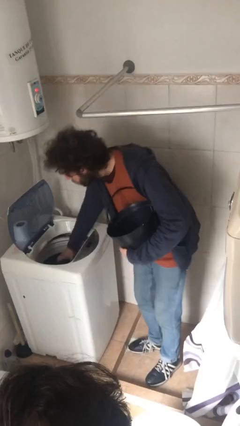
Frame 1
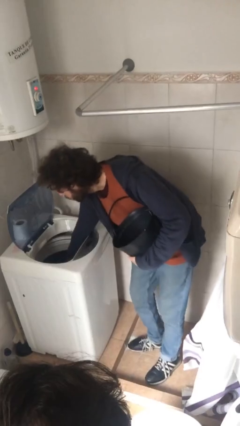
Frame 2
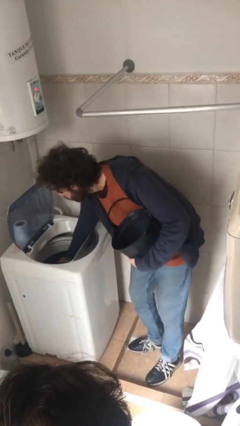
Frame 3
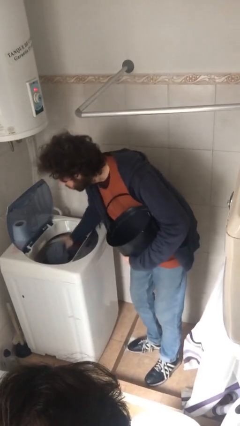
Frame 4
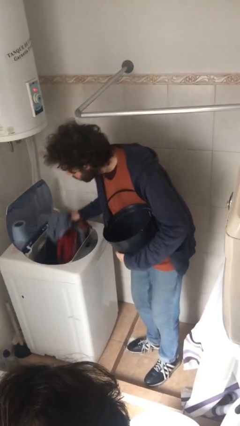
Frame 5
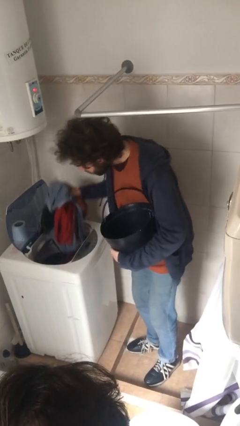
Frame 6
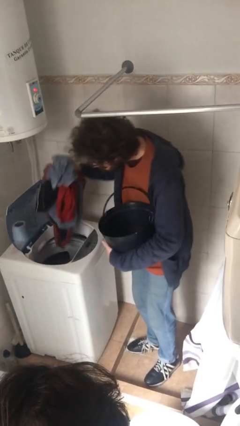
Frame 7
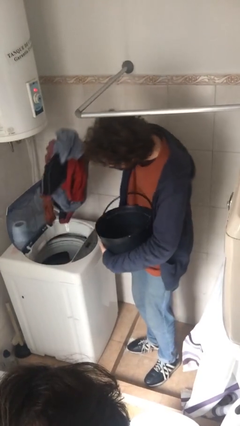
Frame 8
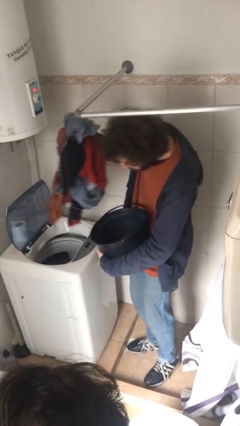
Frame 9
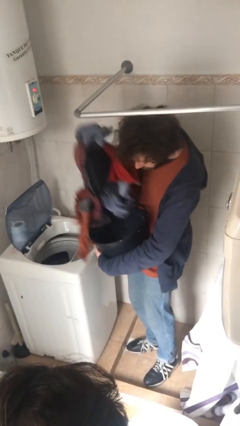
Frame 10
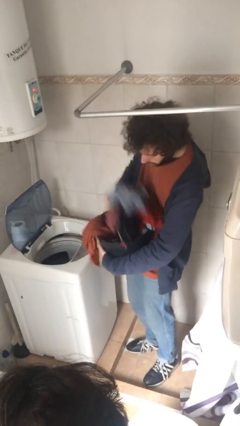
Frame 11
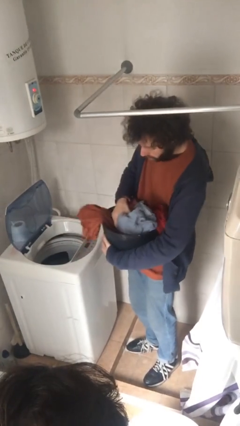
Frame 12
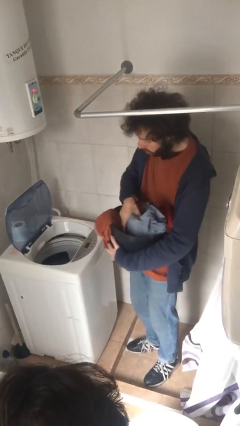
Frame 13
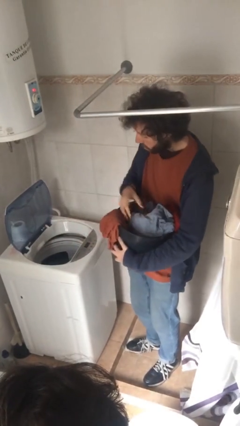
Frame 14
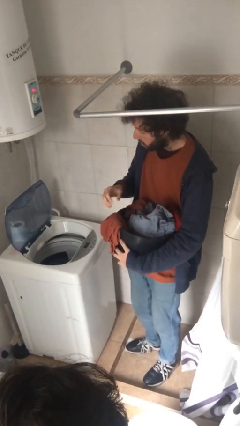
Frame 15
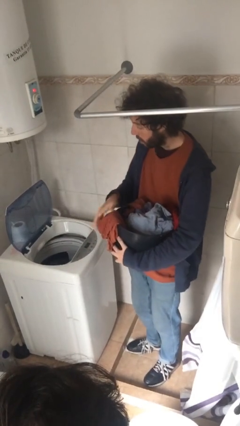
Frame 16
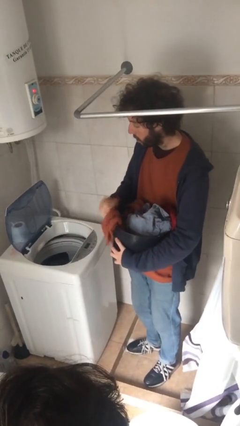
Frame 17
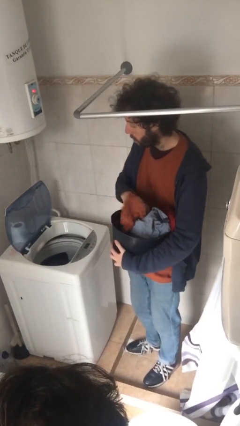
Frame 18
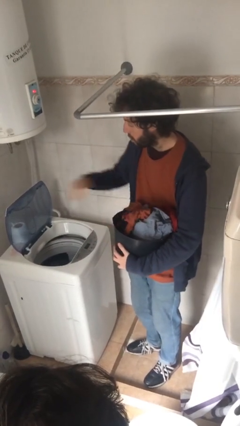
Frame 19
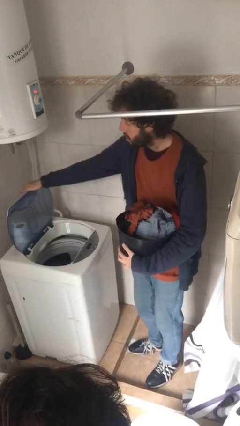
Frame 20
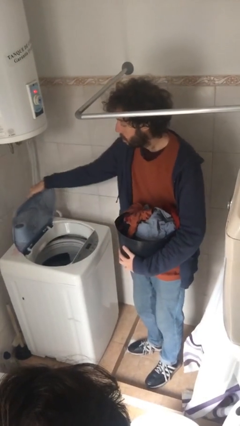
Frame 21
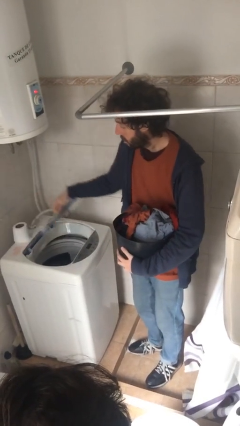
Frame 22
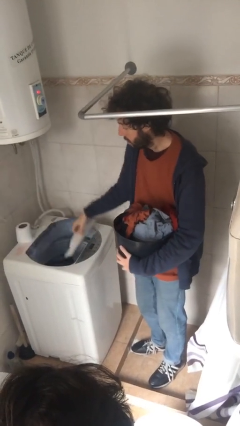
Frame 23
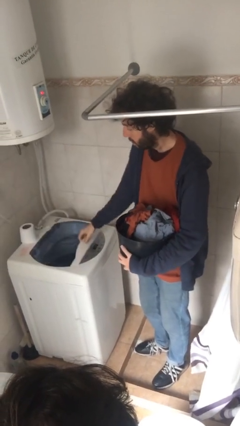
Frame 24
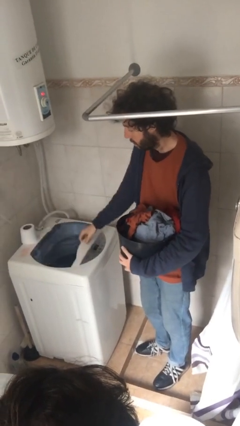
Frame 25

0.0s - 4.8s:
person loads clotheswasher

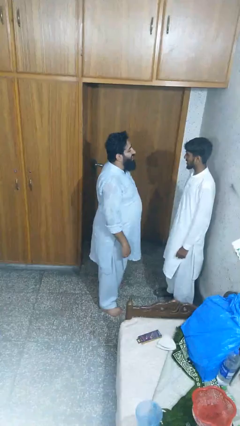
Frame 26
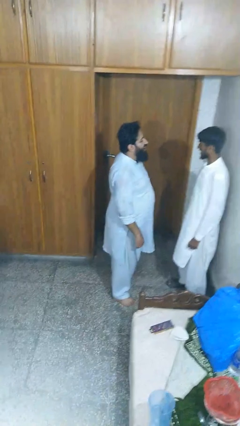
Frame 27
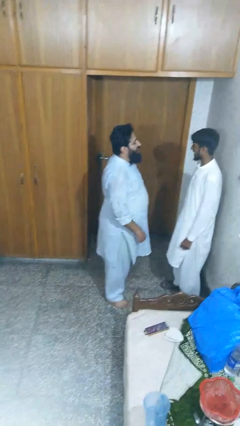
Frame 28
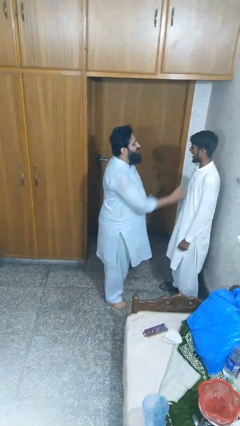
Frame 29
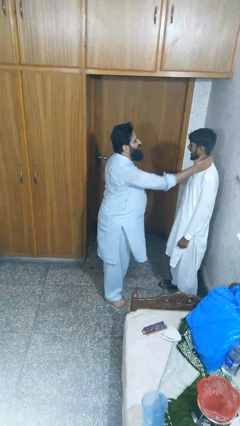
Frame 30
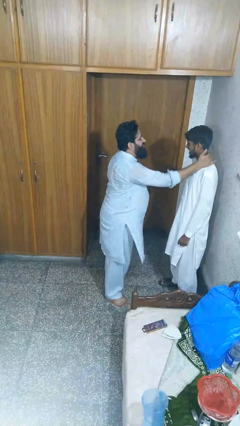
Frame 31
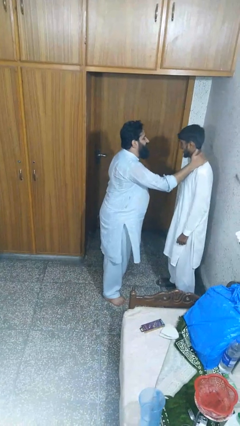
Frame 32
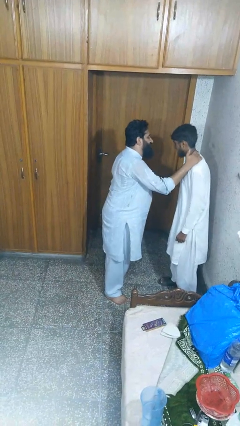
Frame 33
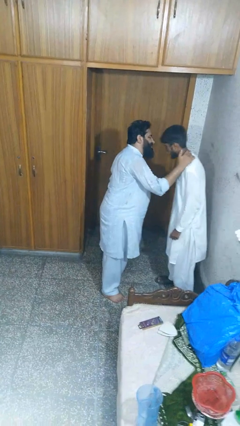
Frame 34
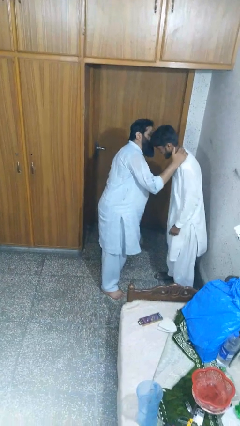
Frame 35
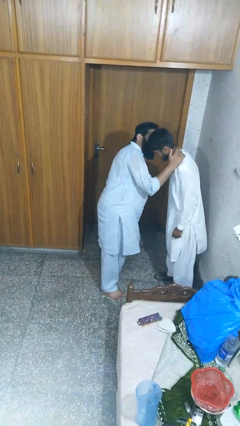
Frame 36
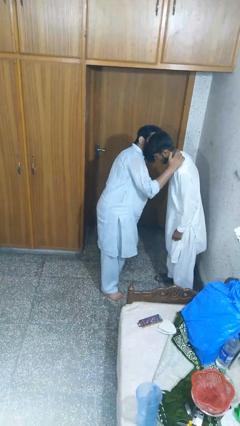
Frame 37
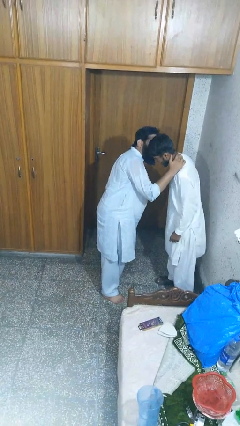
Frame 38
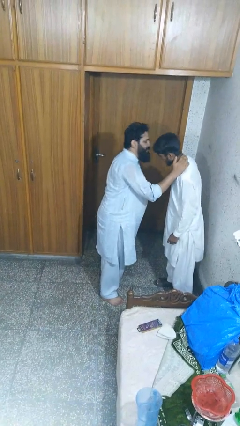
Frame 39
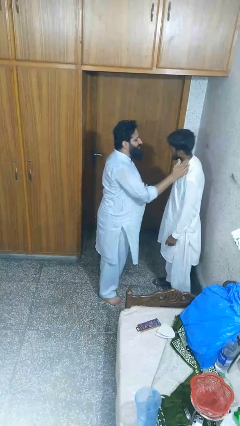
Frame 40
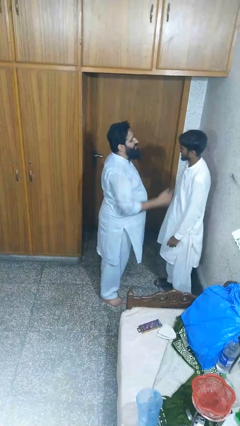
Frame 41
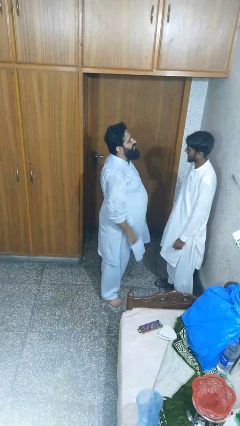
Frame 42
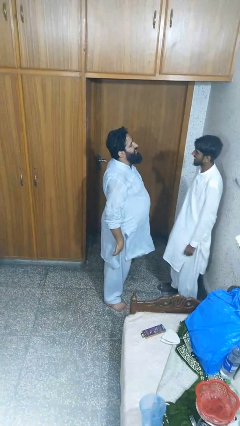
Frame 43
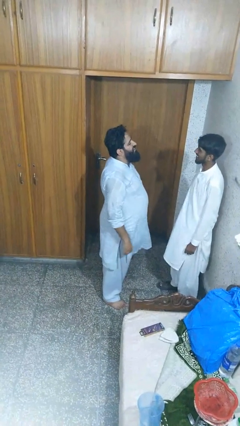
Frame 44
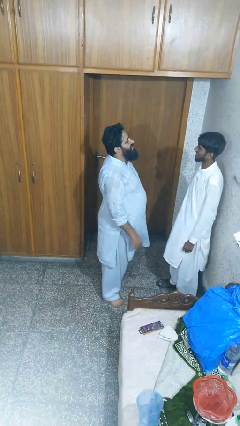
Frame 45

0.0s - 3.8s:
person kisses cheek of person

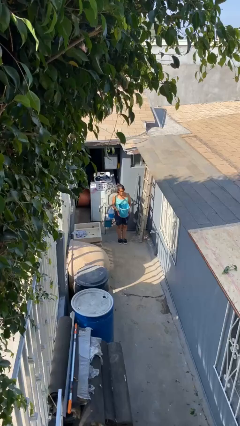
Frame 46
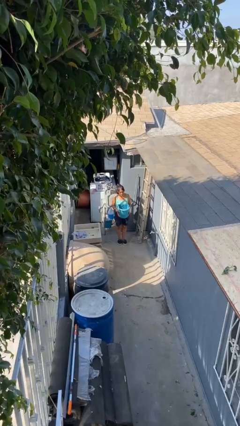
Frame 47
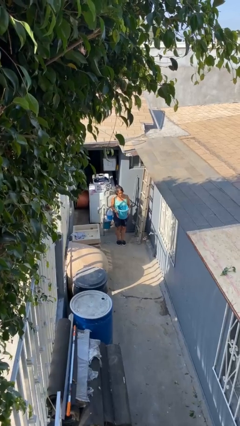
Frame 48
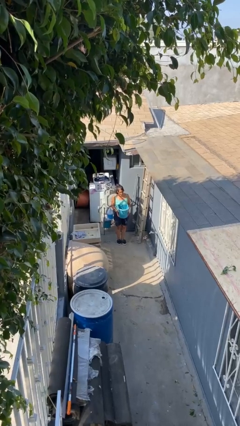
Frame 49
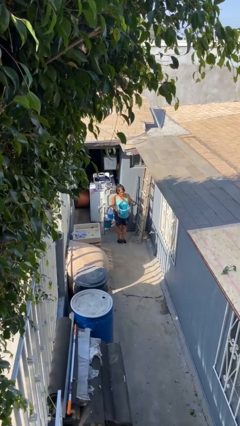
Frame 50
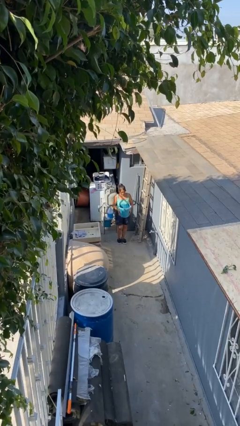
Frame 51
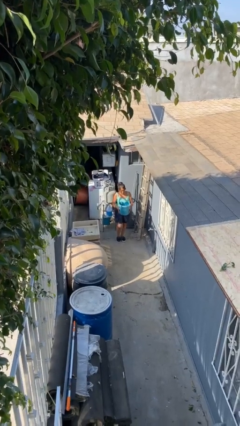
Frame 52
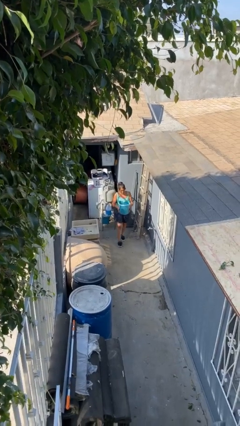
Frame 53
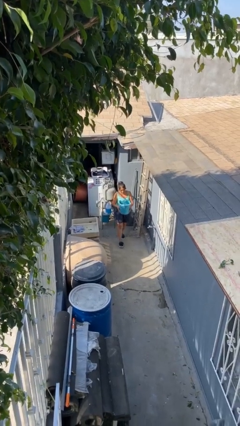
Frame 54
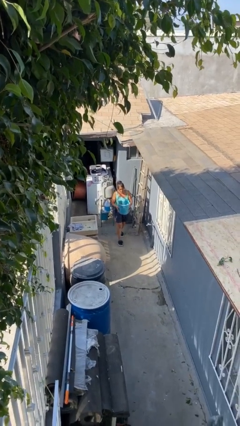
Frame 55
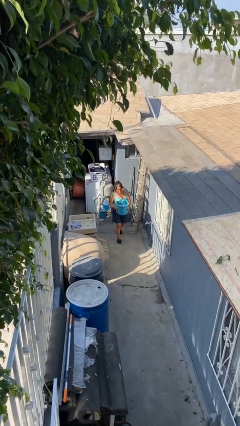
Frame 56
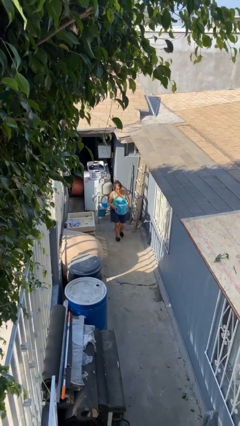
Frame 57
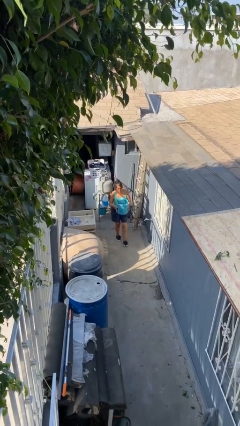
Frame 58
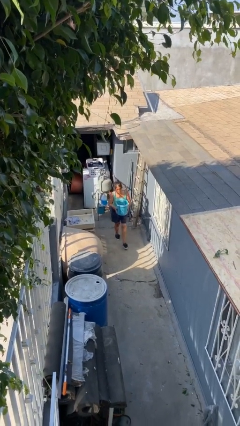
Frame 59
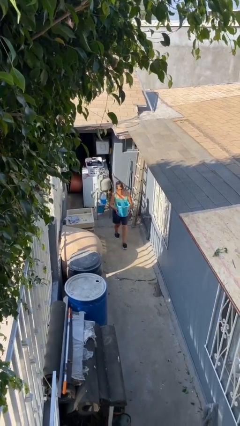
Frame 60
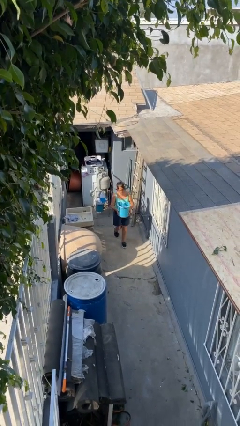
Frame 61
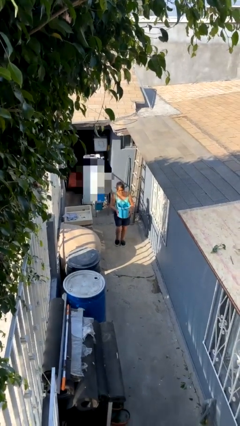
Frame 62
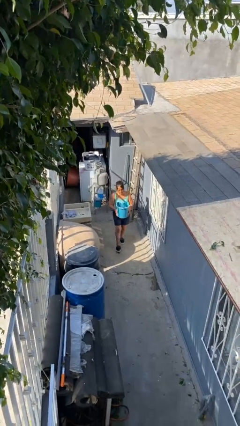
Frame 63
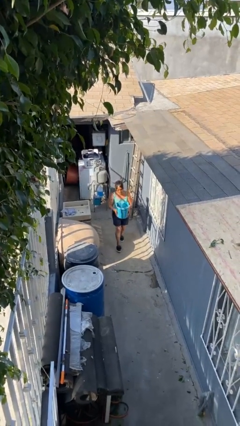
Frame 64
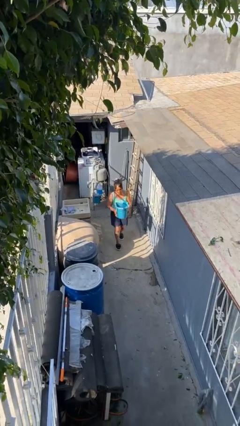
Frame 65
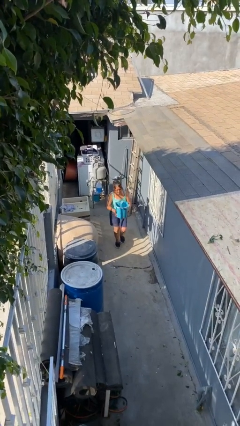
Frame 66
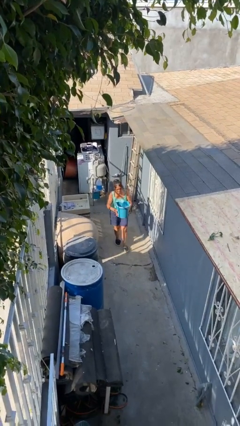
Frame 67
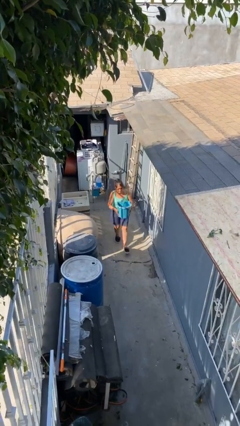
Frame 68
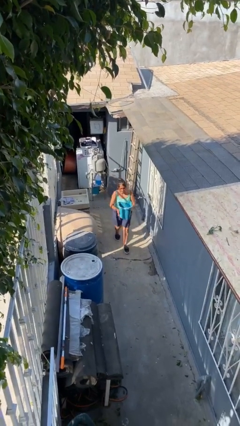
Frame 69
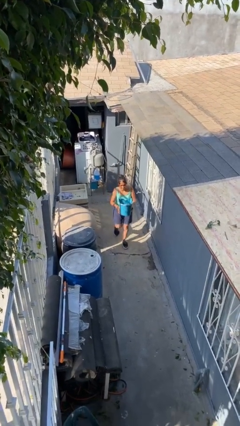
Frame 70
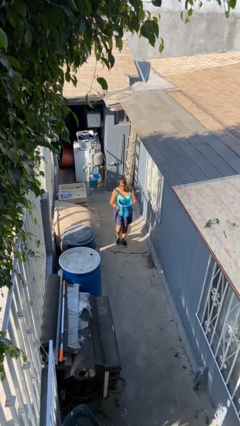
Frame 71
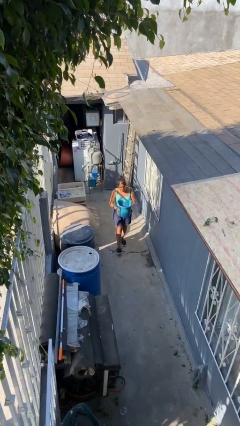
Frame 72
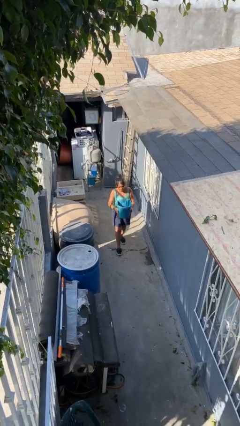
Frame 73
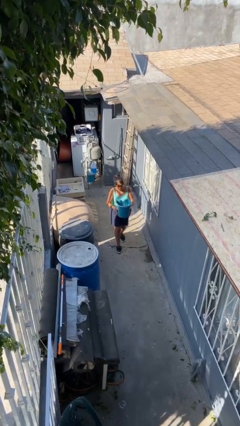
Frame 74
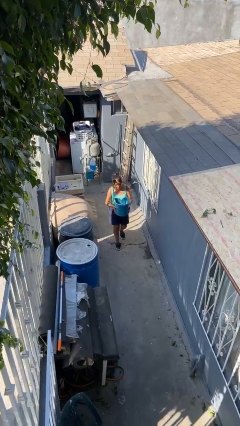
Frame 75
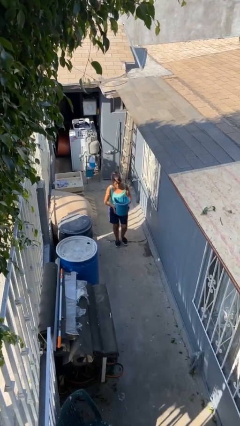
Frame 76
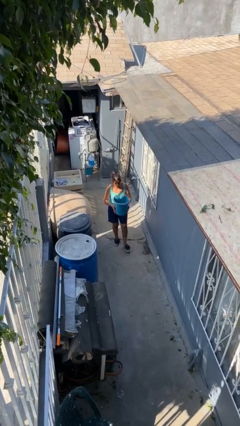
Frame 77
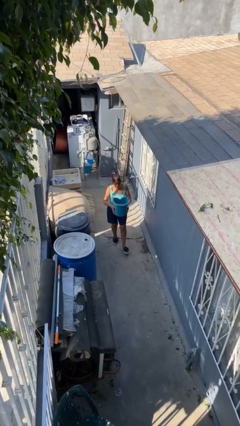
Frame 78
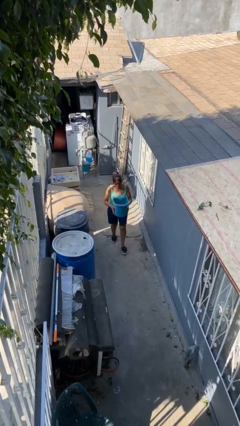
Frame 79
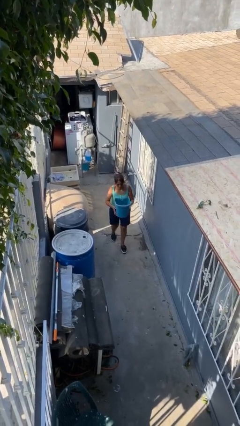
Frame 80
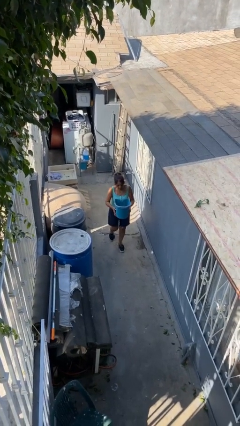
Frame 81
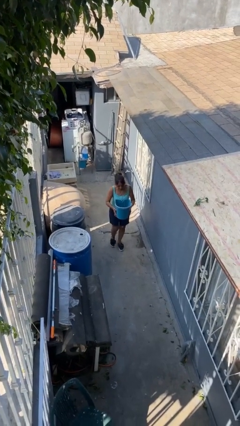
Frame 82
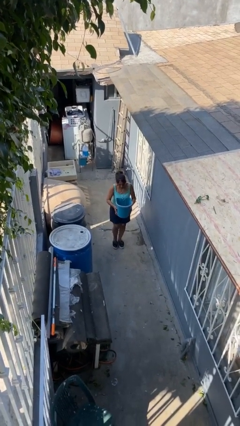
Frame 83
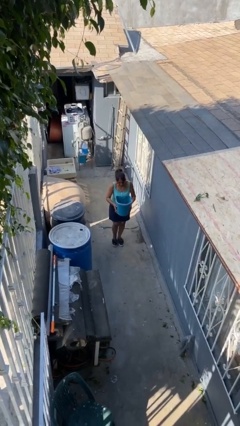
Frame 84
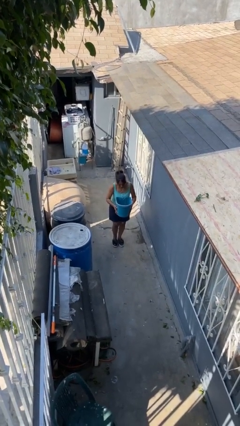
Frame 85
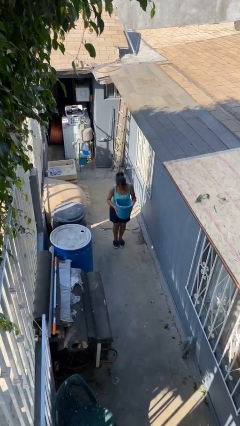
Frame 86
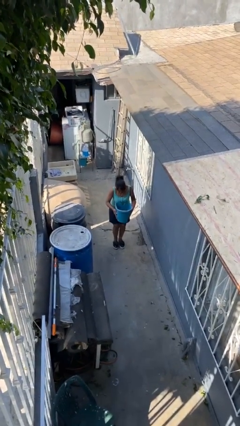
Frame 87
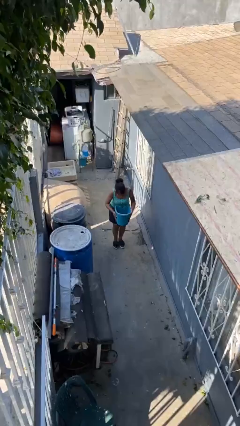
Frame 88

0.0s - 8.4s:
person carries heavy object

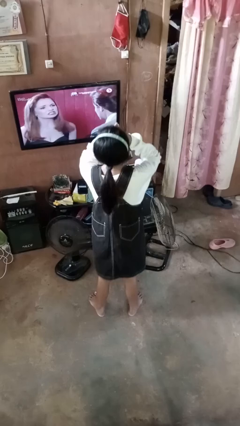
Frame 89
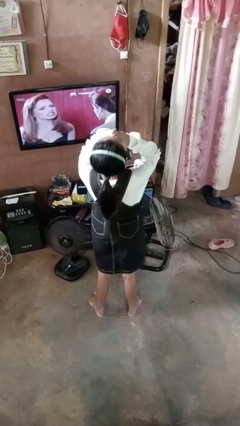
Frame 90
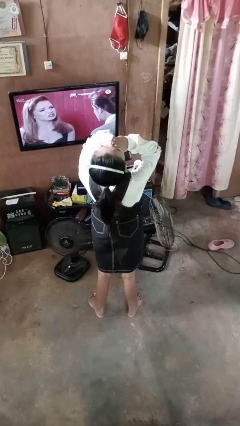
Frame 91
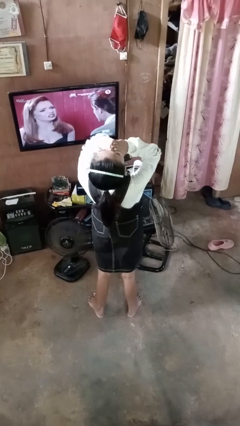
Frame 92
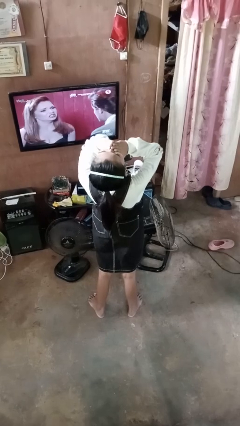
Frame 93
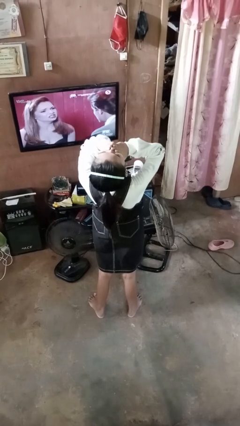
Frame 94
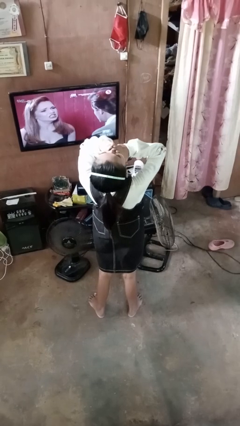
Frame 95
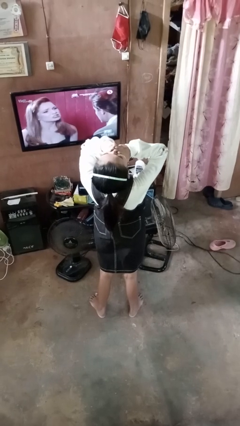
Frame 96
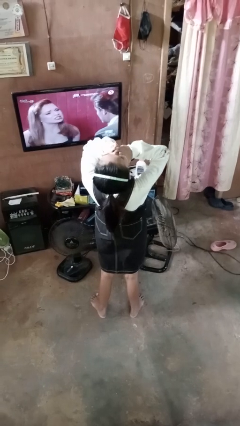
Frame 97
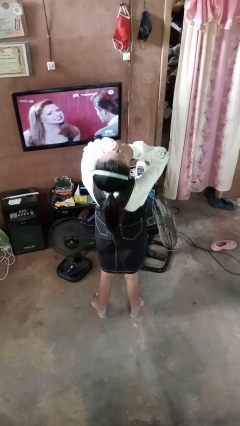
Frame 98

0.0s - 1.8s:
person yawns
